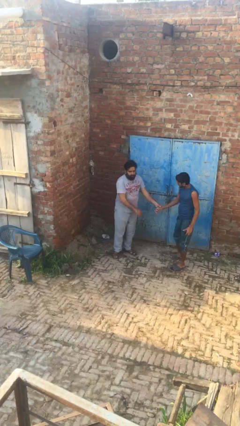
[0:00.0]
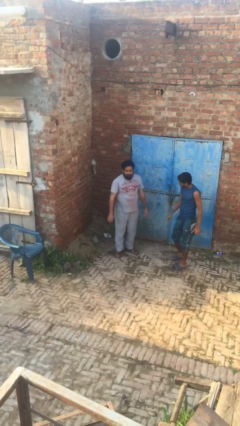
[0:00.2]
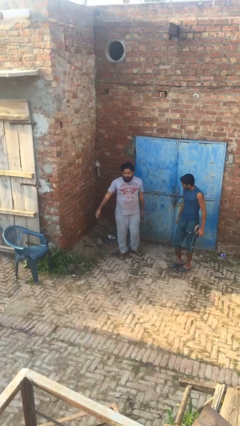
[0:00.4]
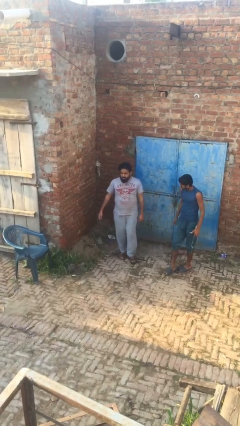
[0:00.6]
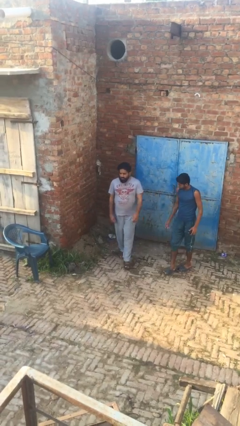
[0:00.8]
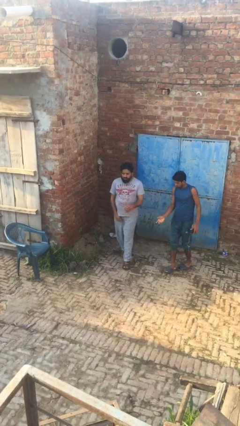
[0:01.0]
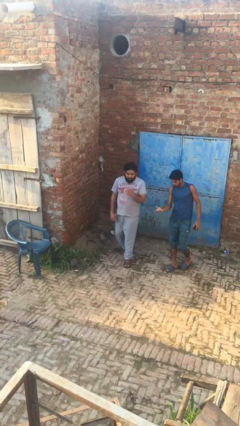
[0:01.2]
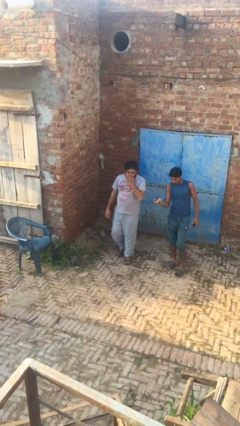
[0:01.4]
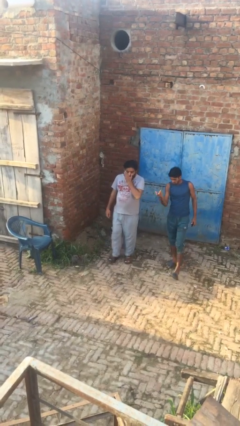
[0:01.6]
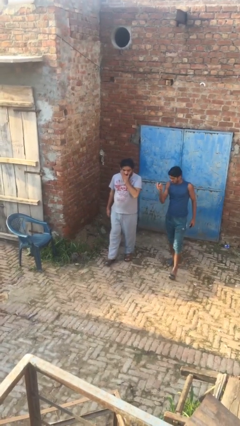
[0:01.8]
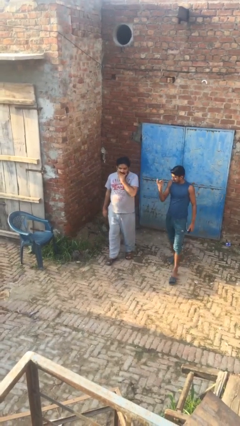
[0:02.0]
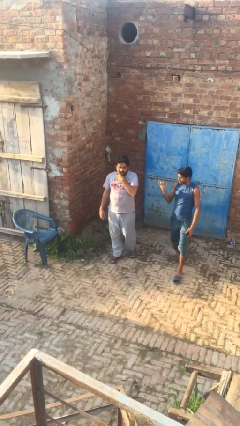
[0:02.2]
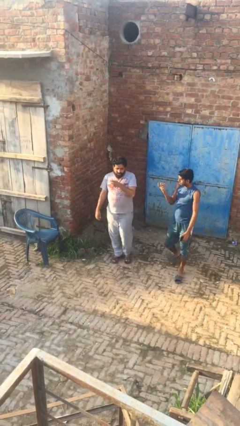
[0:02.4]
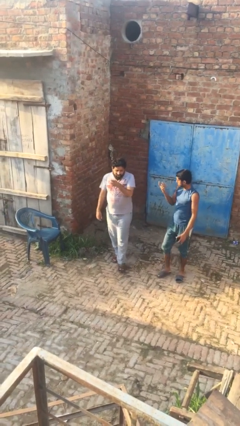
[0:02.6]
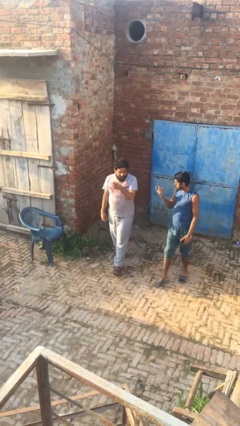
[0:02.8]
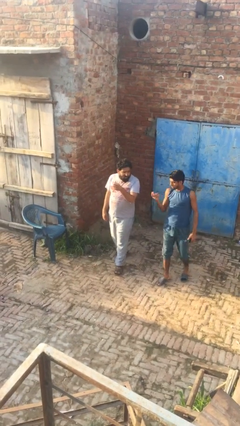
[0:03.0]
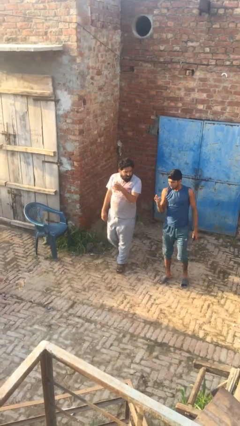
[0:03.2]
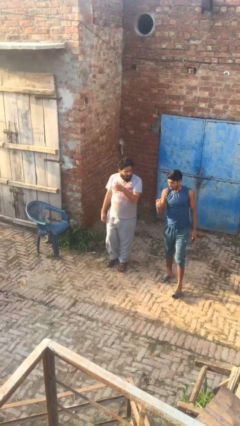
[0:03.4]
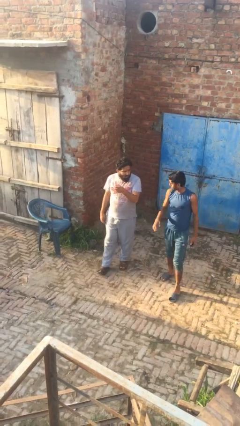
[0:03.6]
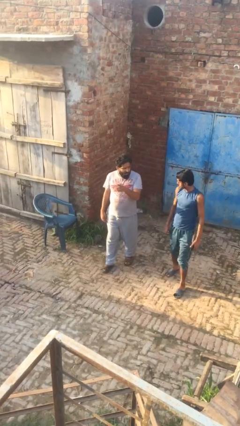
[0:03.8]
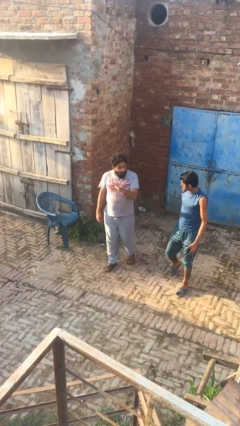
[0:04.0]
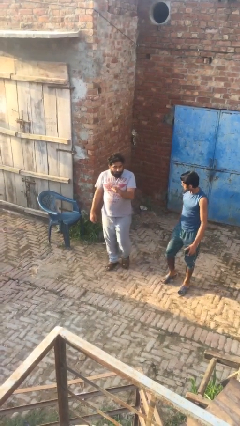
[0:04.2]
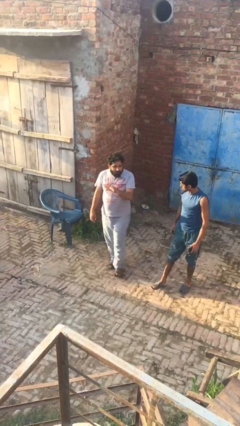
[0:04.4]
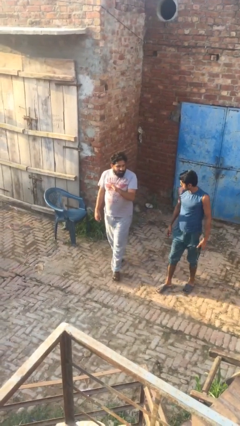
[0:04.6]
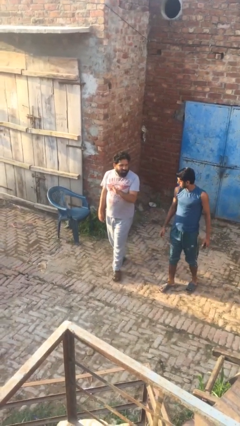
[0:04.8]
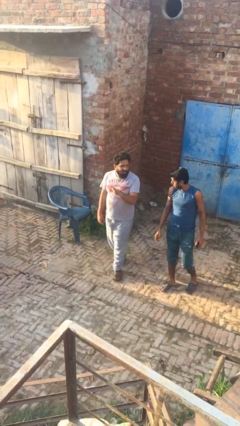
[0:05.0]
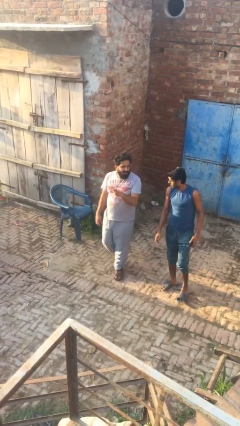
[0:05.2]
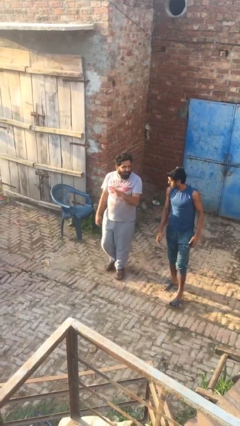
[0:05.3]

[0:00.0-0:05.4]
person talks to person

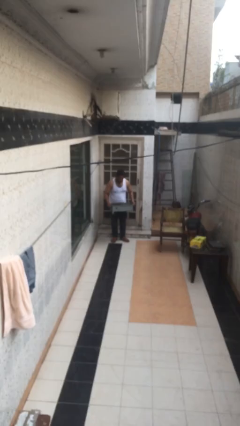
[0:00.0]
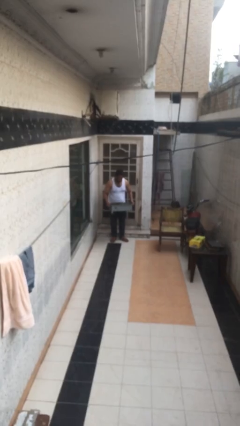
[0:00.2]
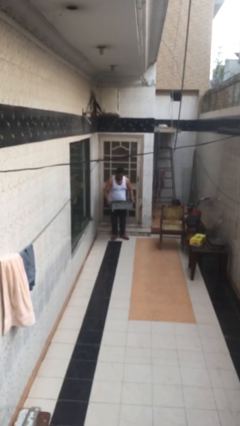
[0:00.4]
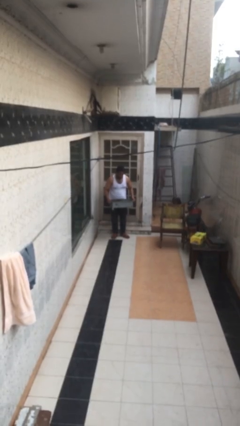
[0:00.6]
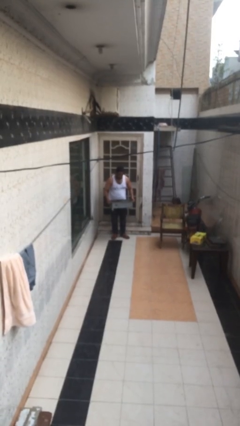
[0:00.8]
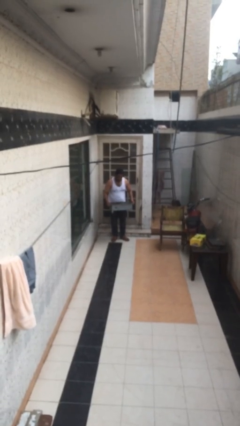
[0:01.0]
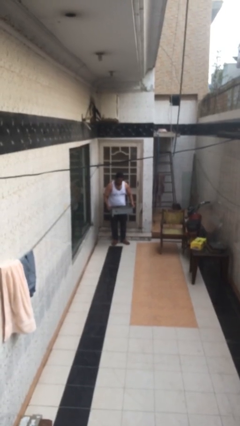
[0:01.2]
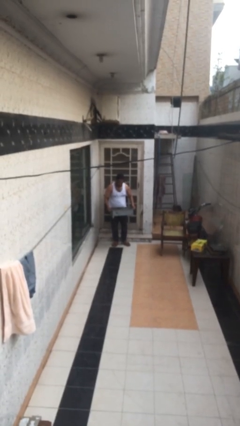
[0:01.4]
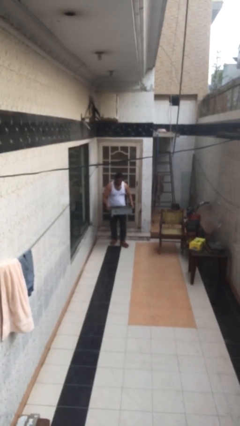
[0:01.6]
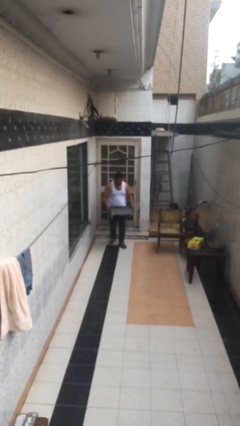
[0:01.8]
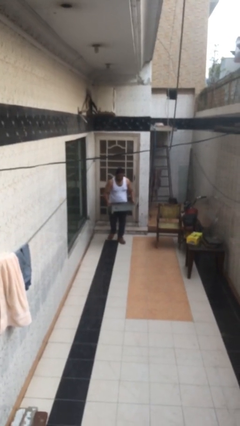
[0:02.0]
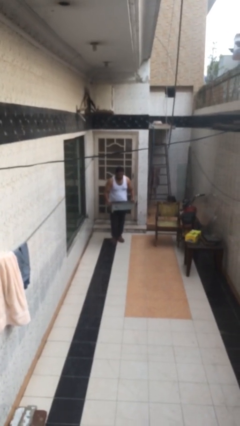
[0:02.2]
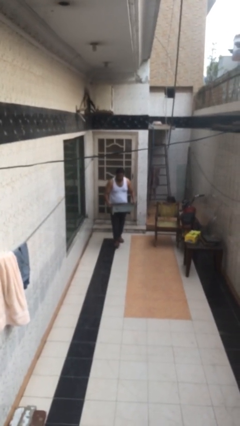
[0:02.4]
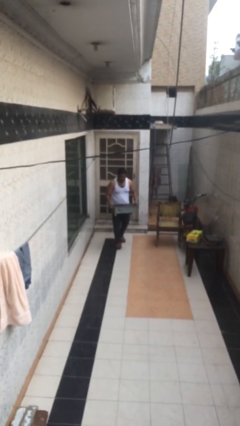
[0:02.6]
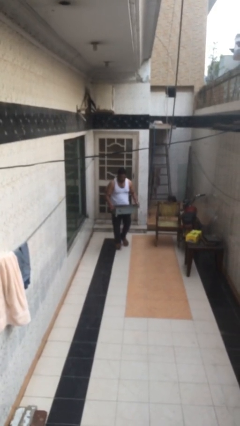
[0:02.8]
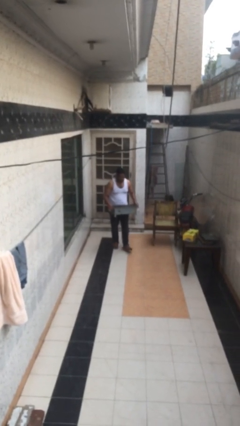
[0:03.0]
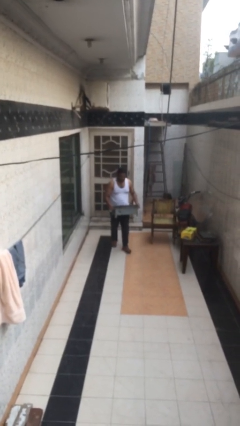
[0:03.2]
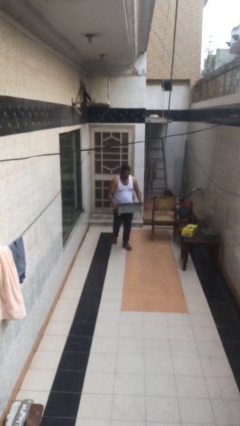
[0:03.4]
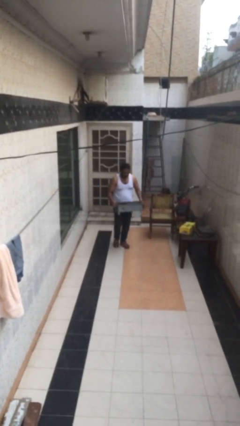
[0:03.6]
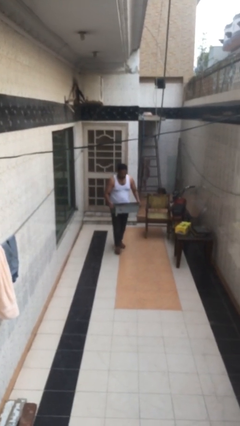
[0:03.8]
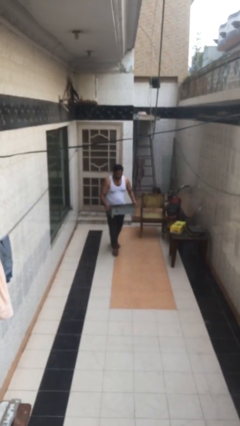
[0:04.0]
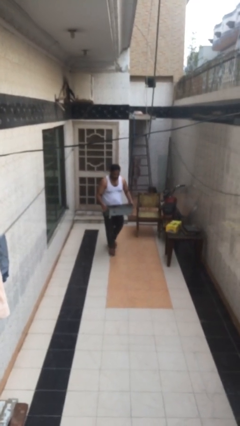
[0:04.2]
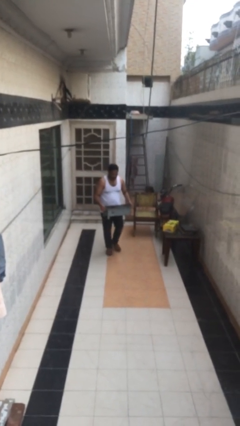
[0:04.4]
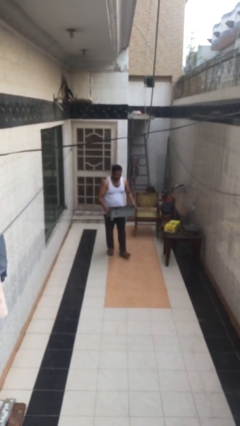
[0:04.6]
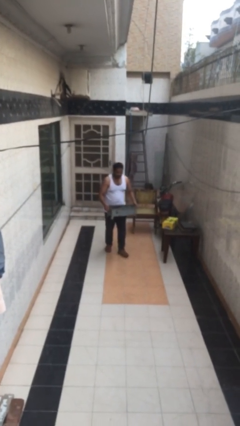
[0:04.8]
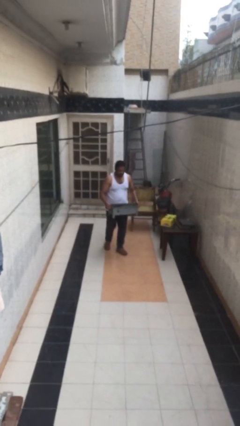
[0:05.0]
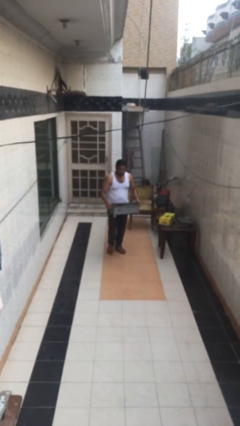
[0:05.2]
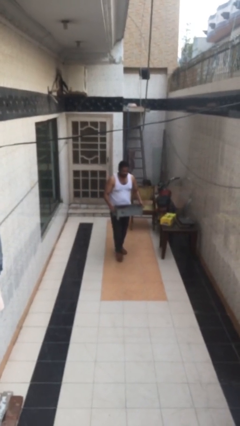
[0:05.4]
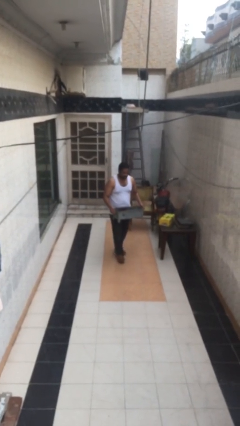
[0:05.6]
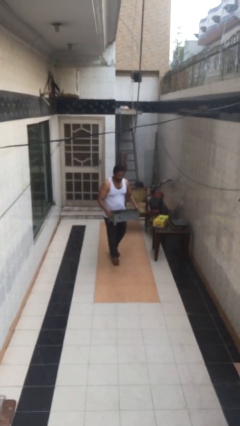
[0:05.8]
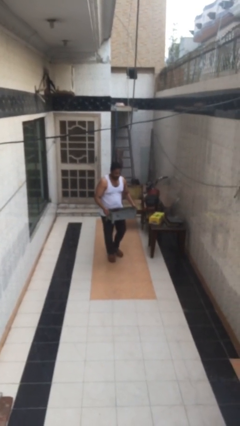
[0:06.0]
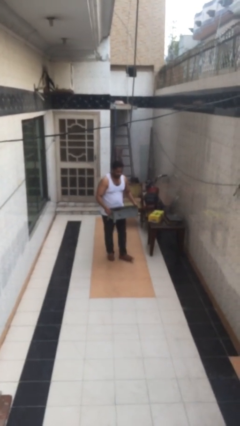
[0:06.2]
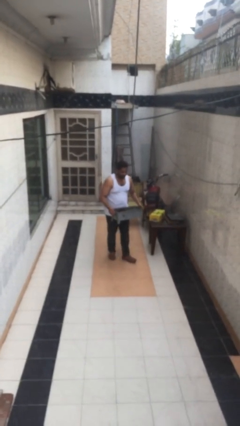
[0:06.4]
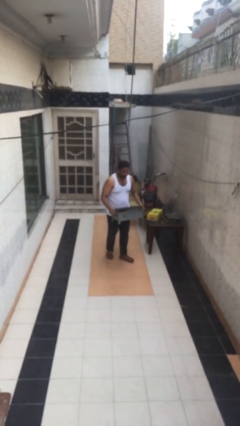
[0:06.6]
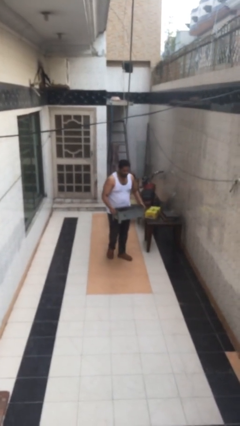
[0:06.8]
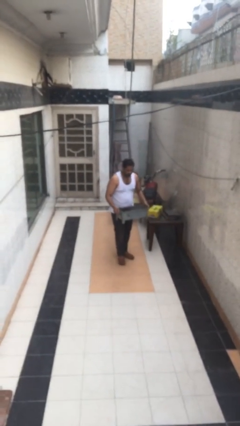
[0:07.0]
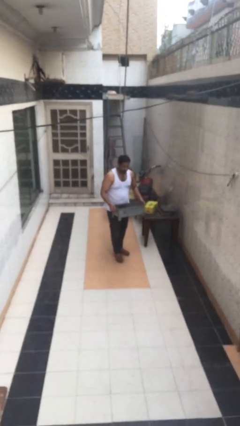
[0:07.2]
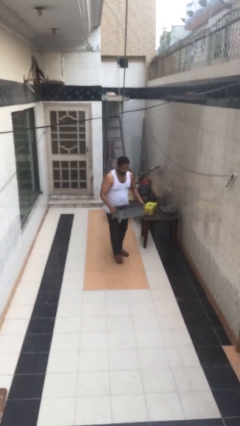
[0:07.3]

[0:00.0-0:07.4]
person carries heavy object

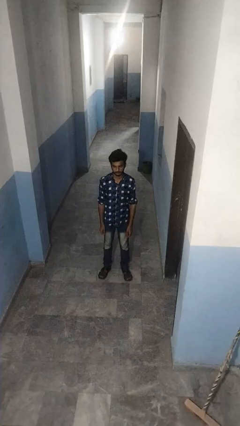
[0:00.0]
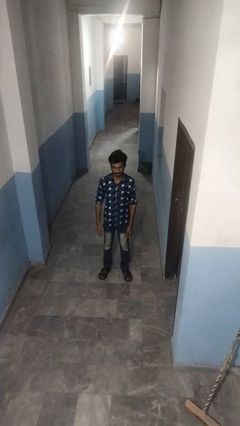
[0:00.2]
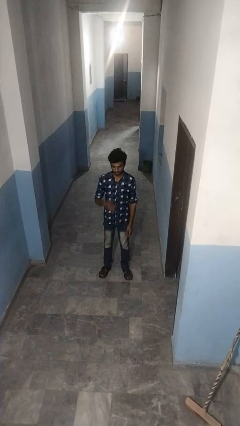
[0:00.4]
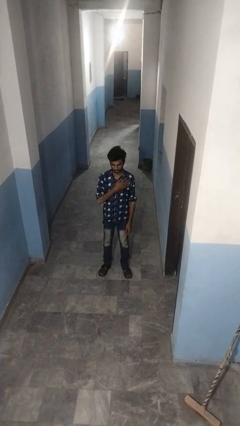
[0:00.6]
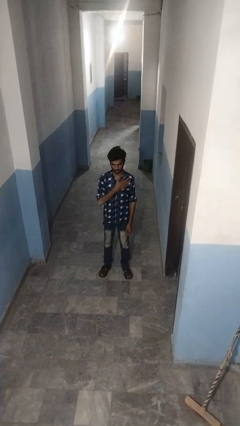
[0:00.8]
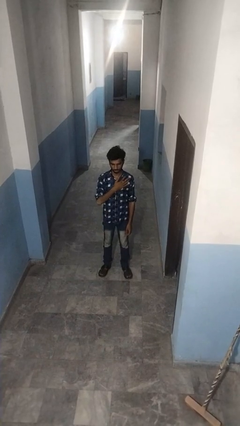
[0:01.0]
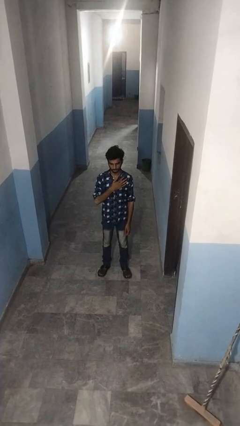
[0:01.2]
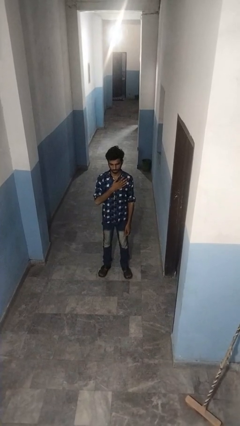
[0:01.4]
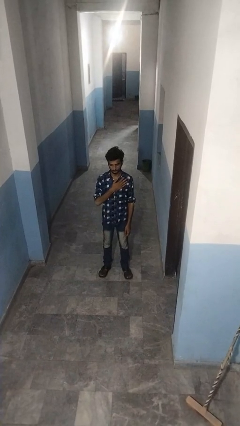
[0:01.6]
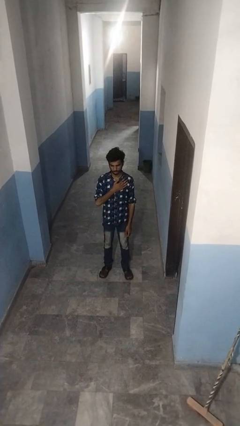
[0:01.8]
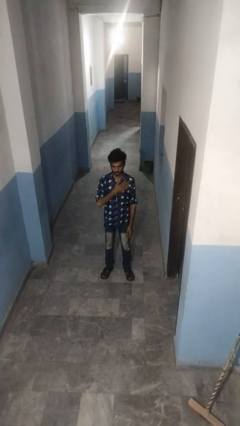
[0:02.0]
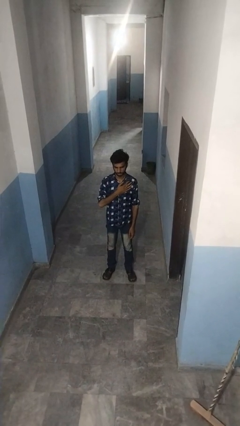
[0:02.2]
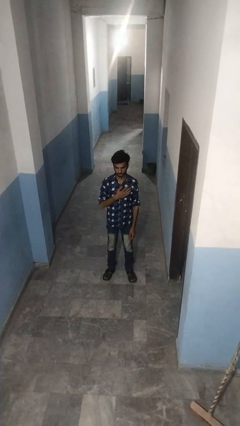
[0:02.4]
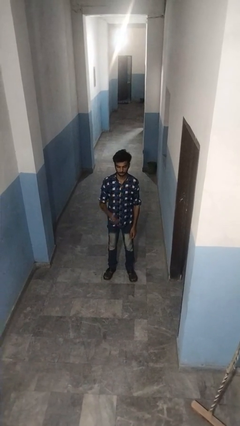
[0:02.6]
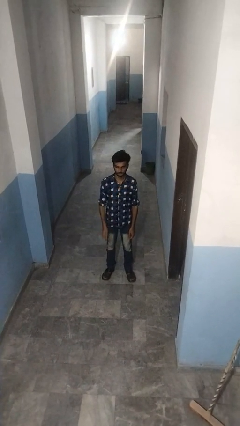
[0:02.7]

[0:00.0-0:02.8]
person drums on chest

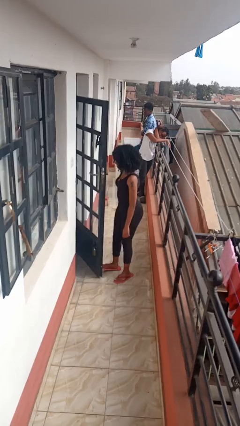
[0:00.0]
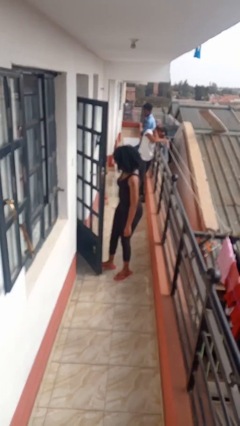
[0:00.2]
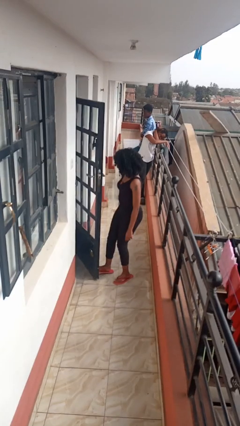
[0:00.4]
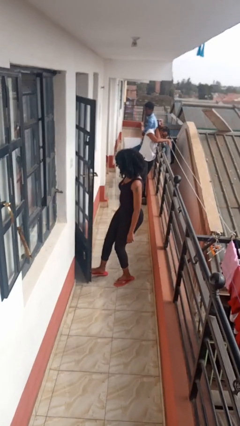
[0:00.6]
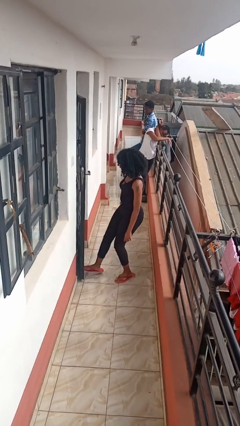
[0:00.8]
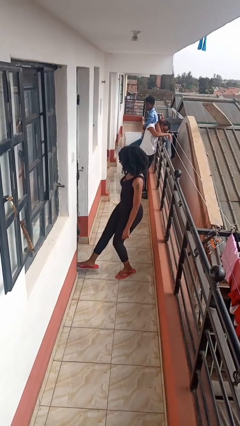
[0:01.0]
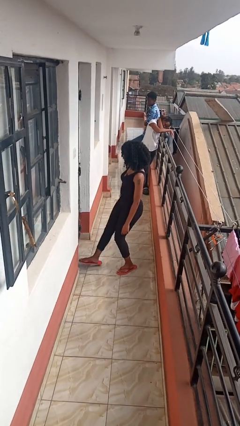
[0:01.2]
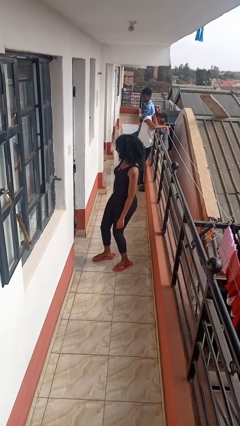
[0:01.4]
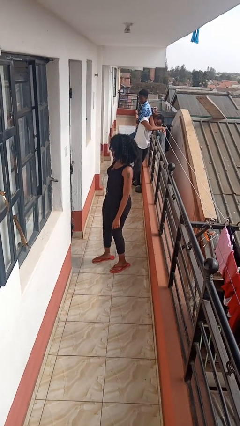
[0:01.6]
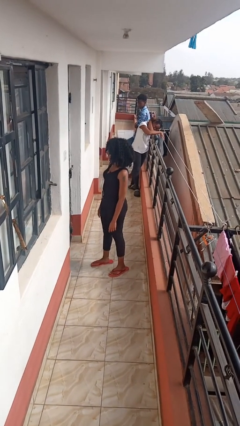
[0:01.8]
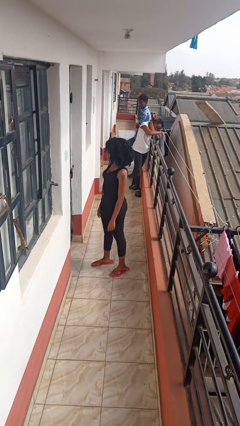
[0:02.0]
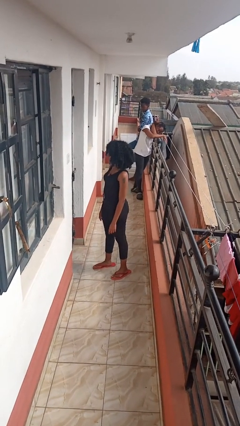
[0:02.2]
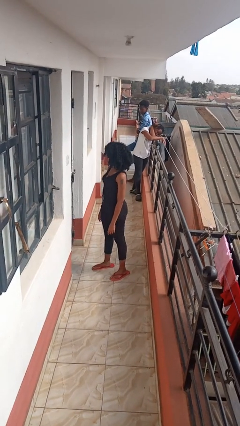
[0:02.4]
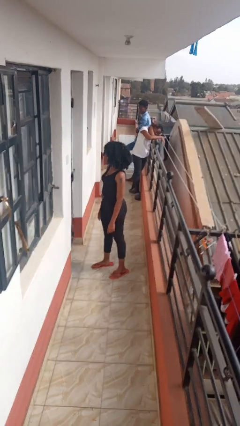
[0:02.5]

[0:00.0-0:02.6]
person closes door with foot
